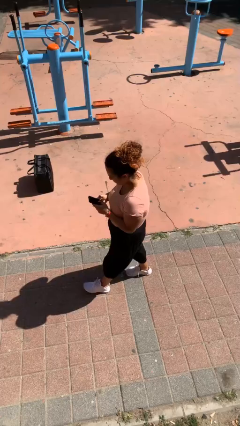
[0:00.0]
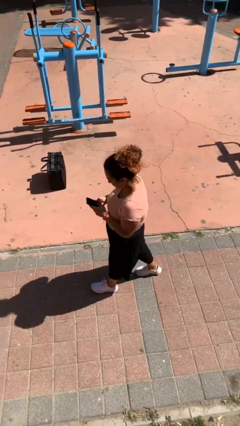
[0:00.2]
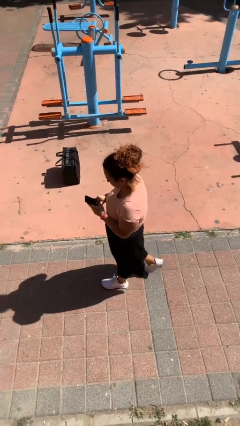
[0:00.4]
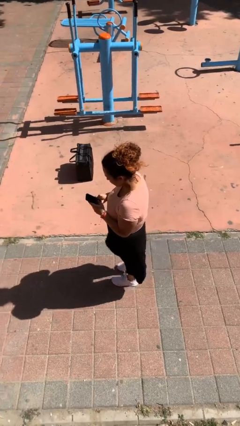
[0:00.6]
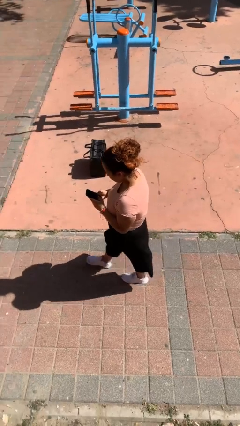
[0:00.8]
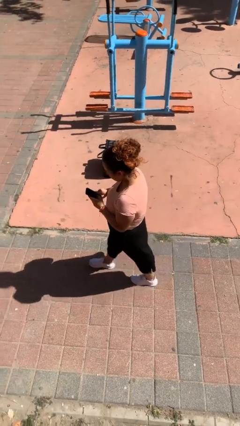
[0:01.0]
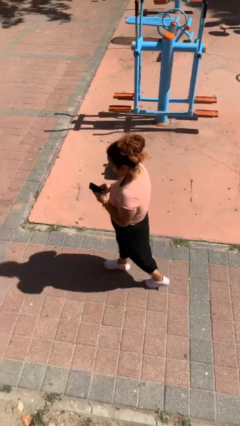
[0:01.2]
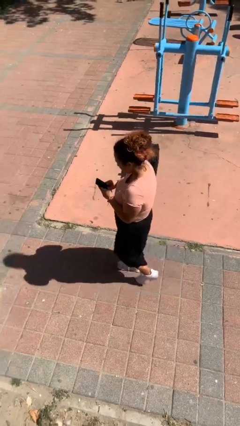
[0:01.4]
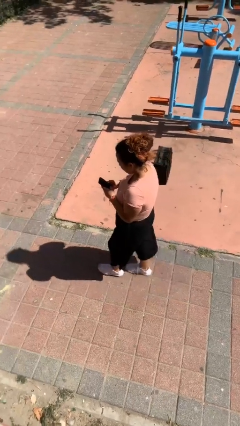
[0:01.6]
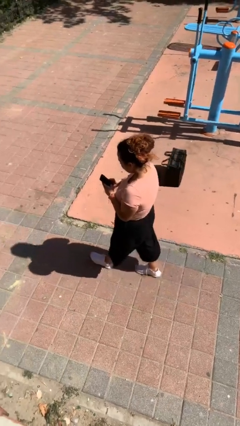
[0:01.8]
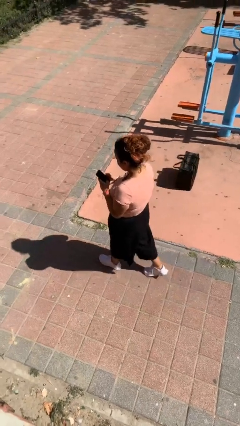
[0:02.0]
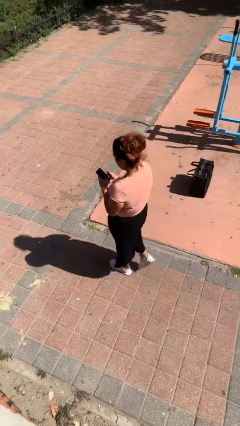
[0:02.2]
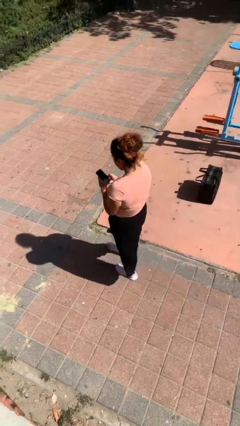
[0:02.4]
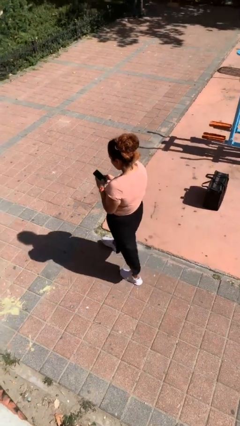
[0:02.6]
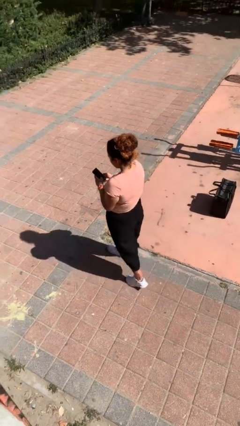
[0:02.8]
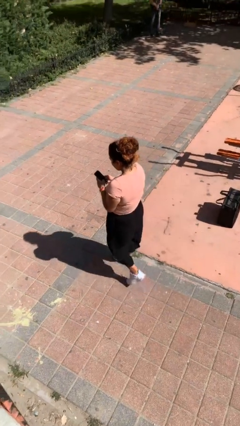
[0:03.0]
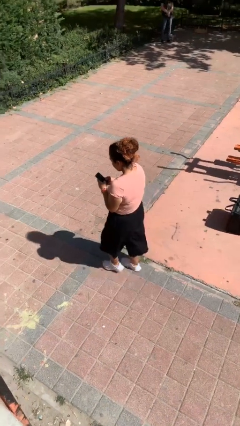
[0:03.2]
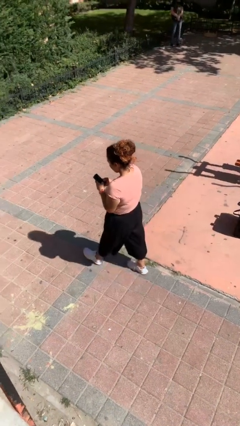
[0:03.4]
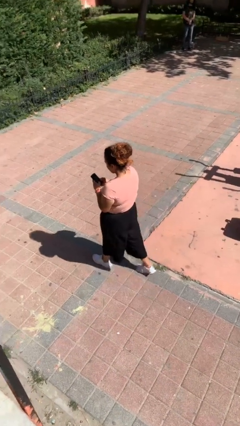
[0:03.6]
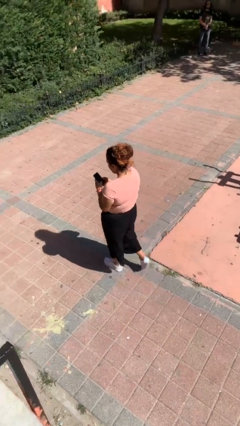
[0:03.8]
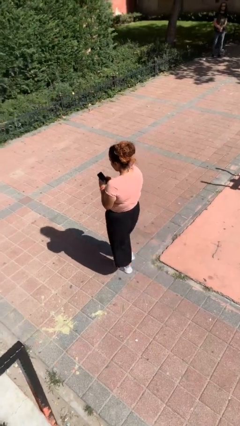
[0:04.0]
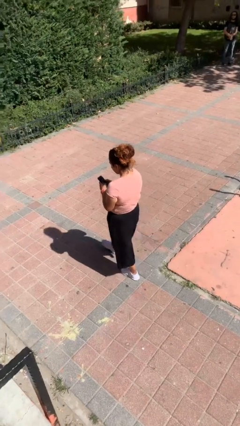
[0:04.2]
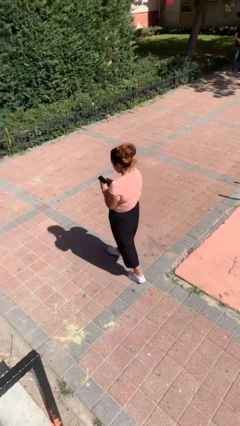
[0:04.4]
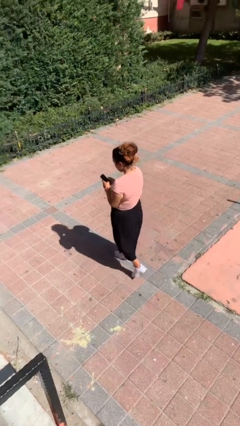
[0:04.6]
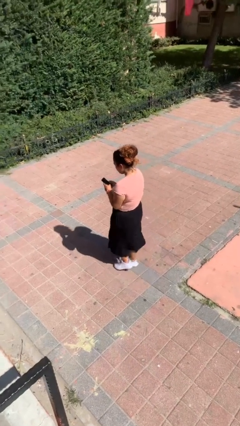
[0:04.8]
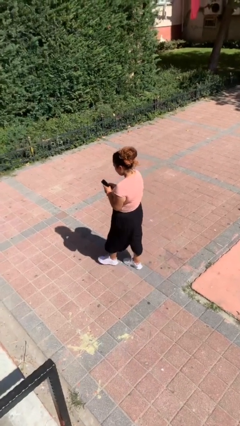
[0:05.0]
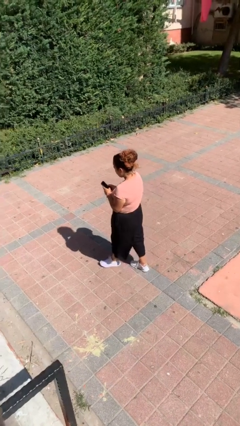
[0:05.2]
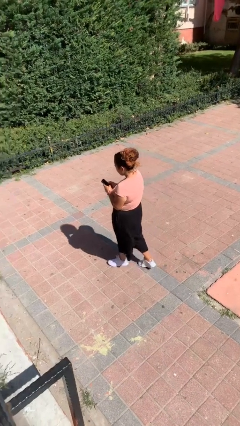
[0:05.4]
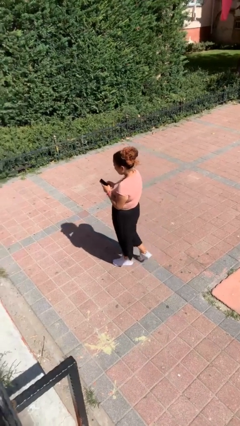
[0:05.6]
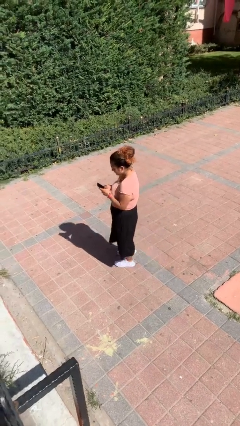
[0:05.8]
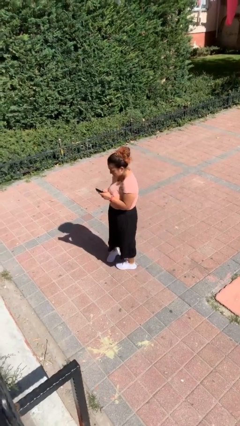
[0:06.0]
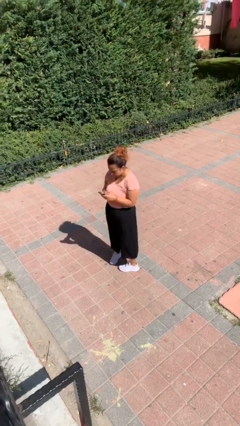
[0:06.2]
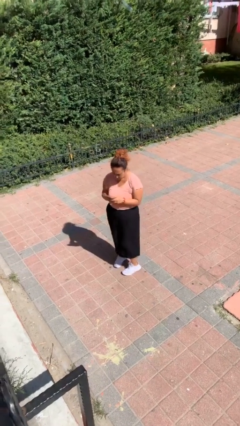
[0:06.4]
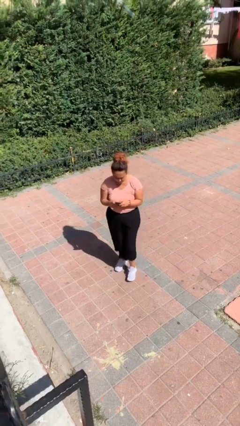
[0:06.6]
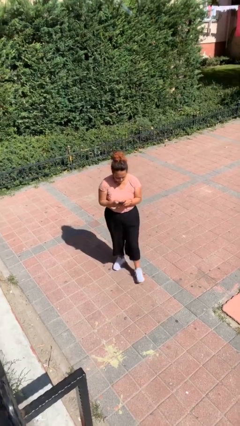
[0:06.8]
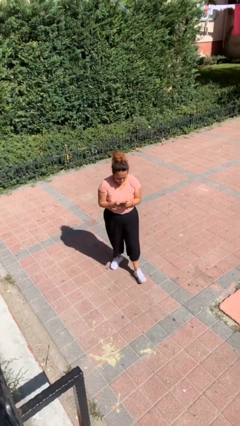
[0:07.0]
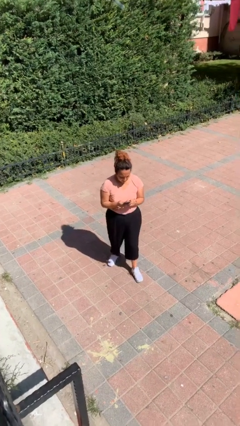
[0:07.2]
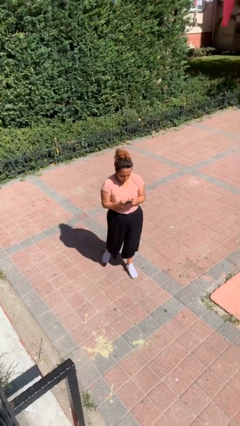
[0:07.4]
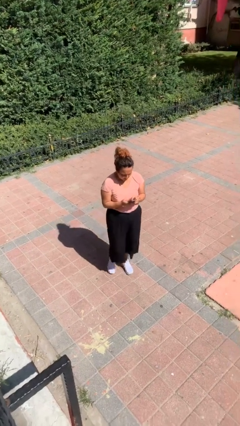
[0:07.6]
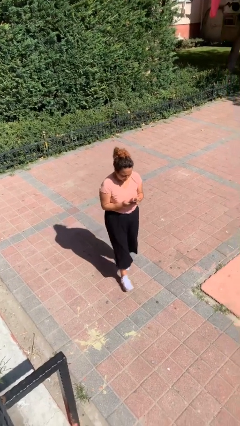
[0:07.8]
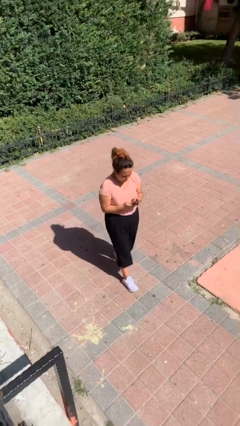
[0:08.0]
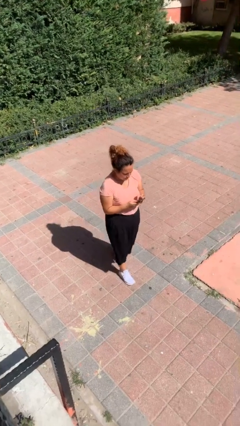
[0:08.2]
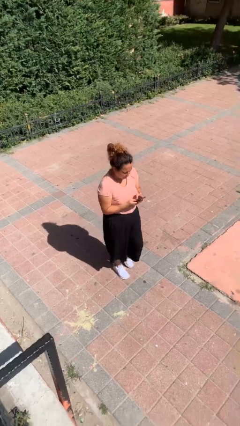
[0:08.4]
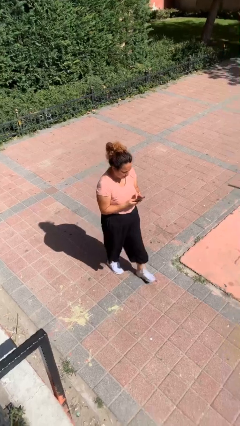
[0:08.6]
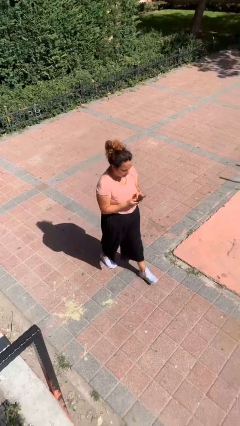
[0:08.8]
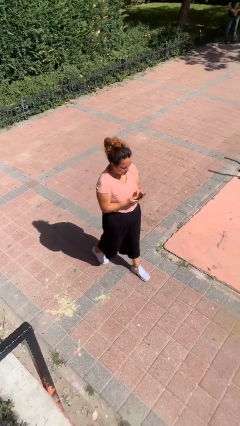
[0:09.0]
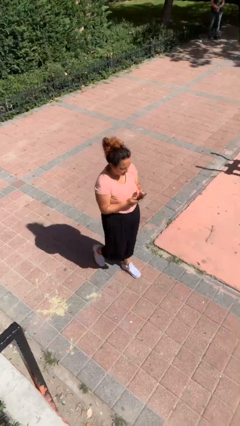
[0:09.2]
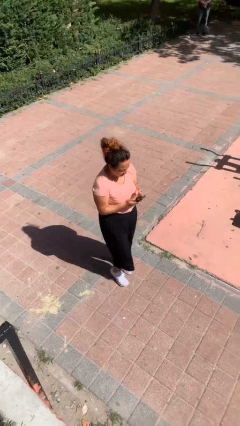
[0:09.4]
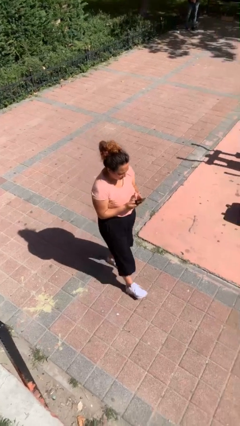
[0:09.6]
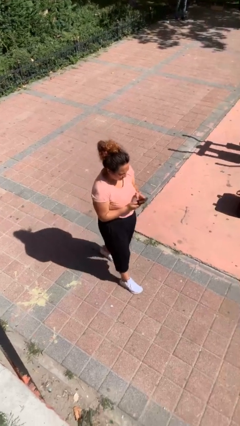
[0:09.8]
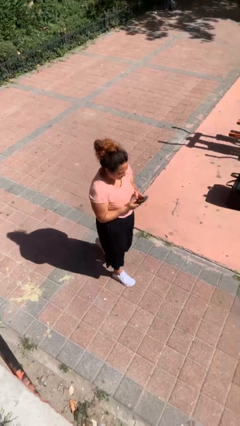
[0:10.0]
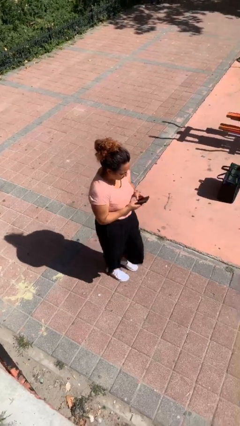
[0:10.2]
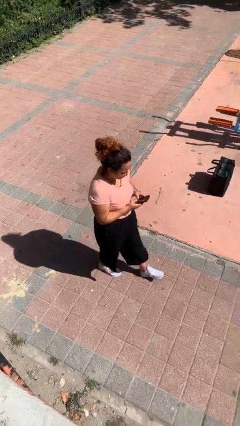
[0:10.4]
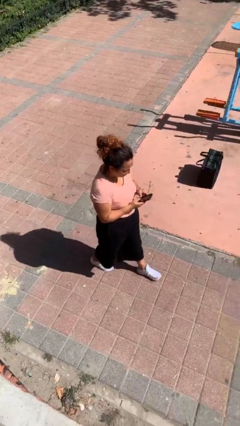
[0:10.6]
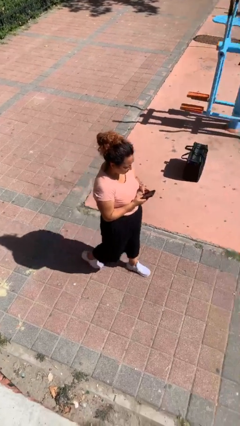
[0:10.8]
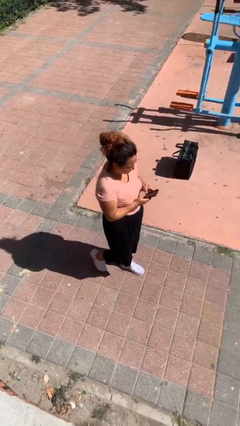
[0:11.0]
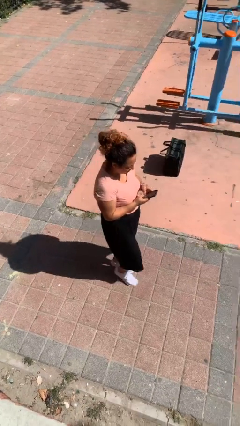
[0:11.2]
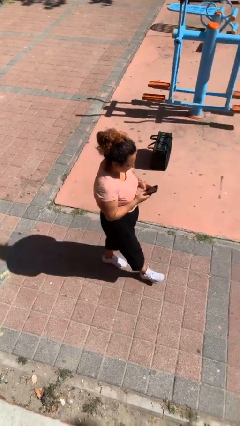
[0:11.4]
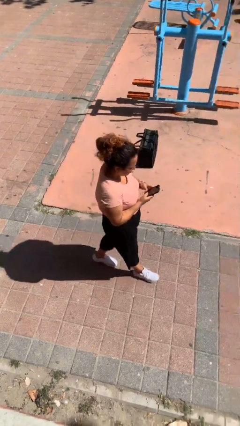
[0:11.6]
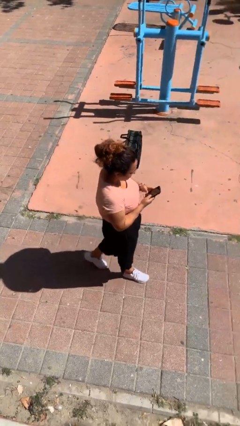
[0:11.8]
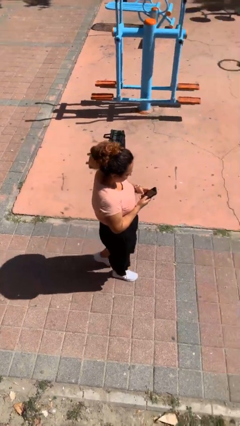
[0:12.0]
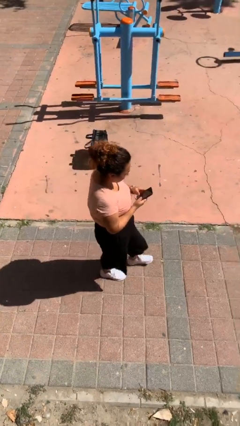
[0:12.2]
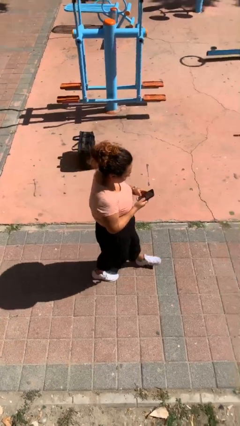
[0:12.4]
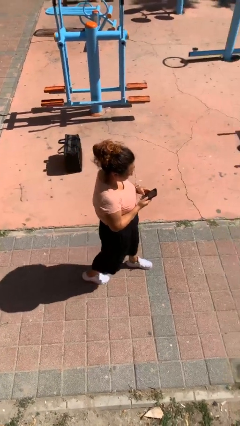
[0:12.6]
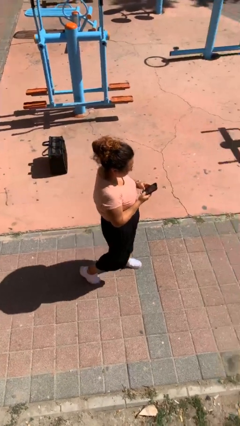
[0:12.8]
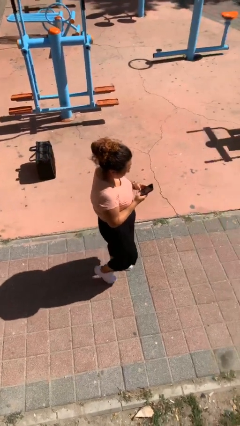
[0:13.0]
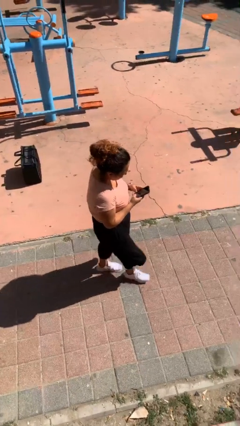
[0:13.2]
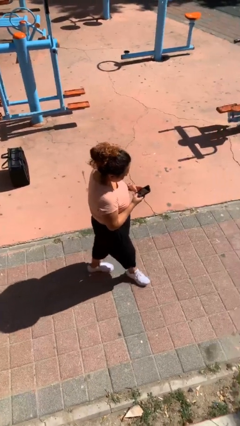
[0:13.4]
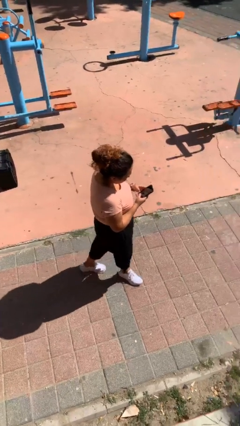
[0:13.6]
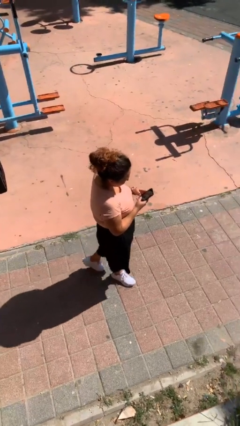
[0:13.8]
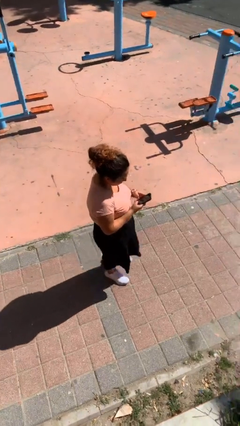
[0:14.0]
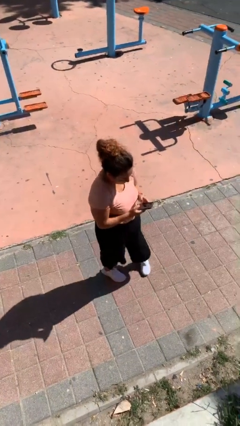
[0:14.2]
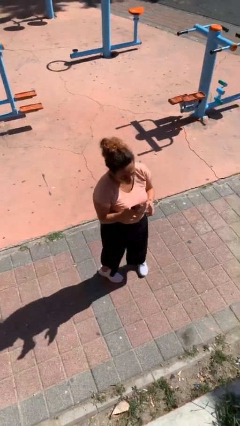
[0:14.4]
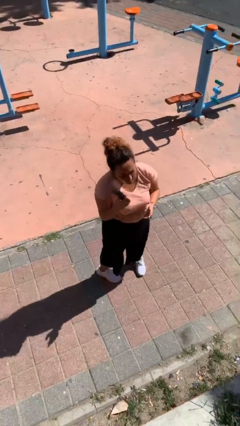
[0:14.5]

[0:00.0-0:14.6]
person texts on phone

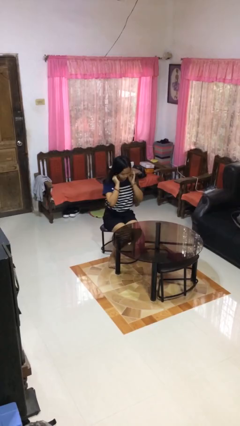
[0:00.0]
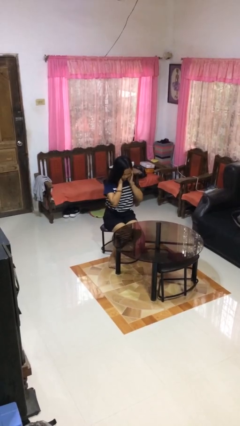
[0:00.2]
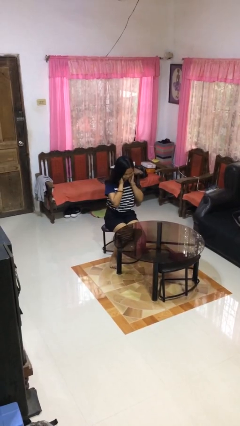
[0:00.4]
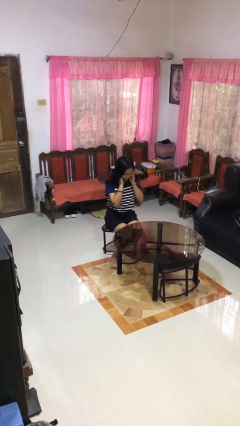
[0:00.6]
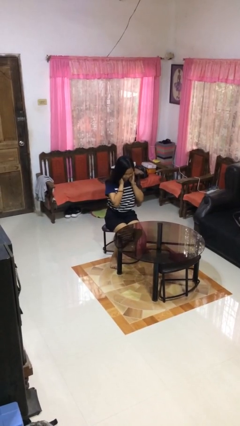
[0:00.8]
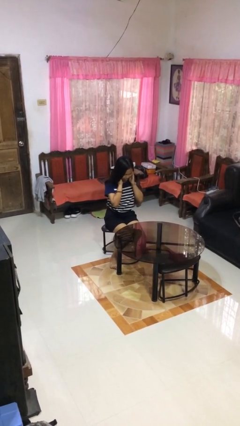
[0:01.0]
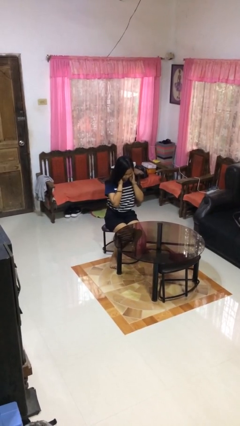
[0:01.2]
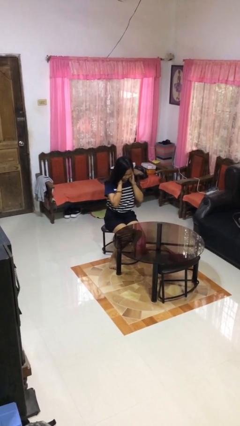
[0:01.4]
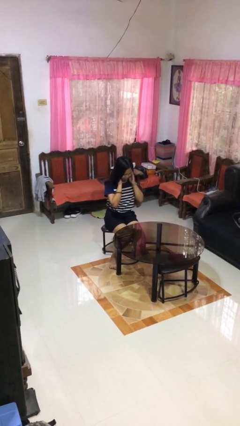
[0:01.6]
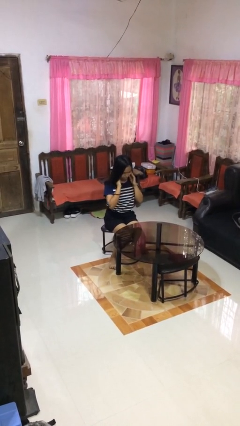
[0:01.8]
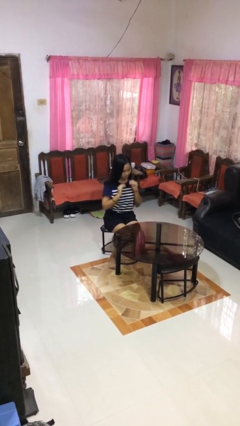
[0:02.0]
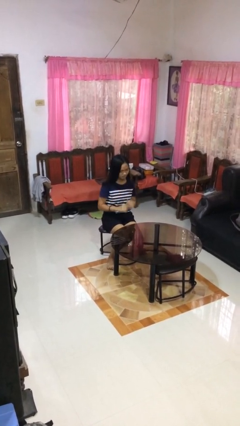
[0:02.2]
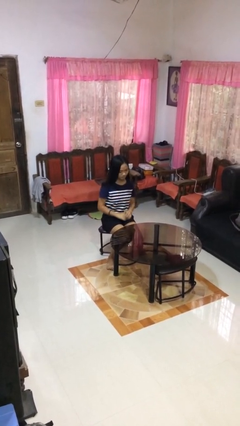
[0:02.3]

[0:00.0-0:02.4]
person puts fingers in ear

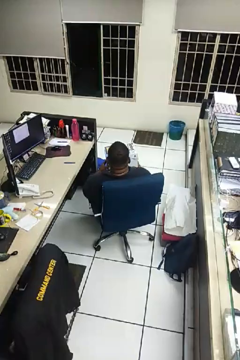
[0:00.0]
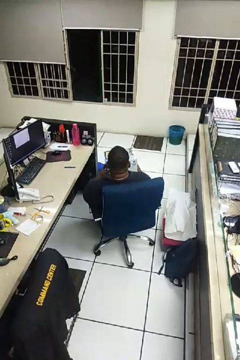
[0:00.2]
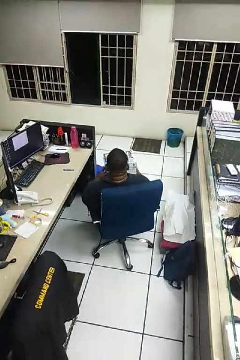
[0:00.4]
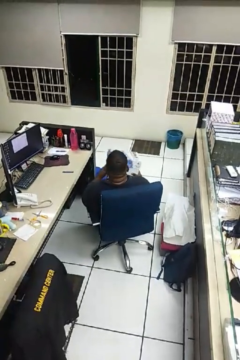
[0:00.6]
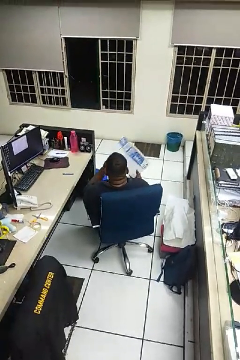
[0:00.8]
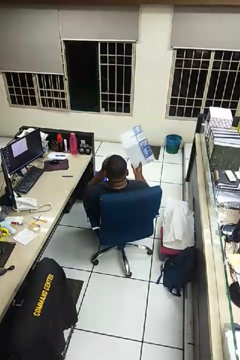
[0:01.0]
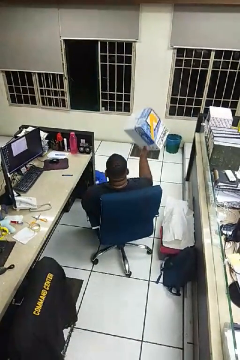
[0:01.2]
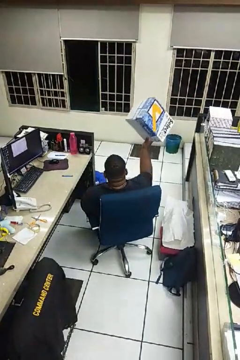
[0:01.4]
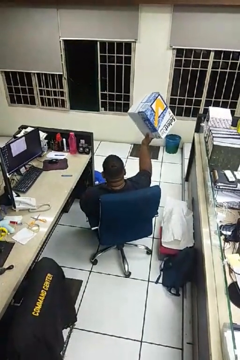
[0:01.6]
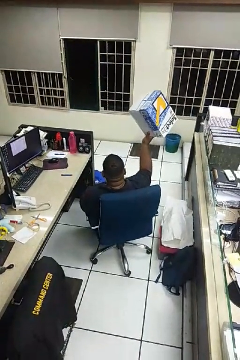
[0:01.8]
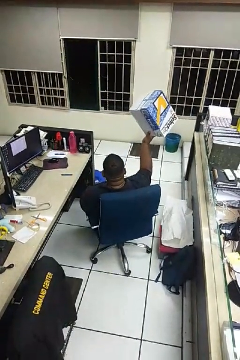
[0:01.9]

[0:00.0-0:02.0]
person holds object above head
